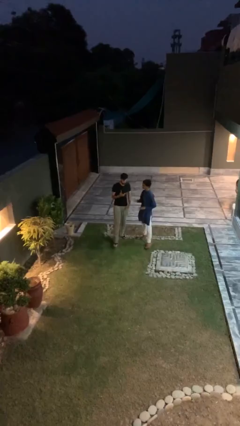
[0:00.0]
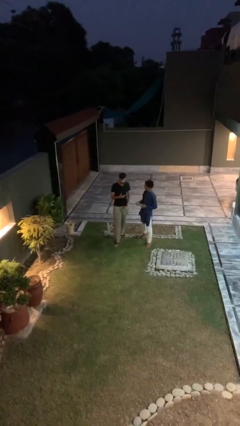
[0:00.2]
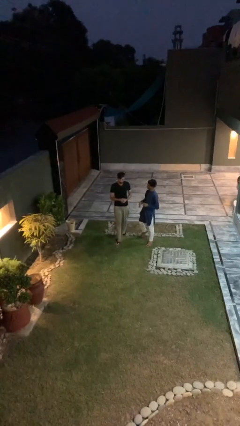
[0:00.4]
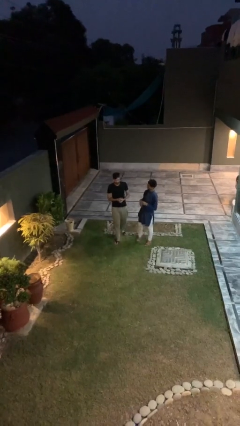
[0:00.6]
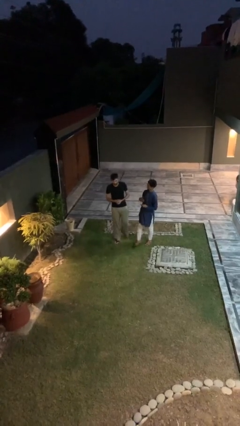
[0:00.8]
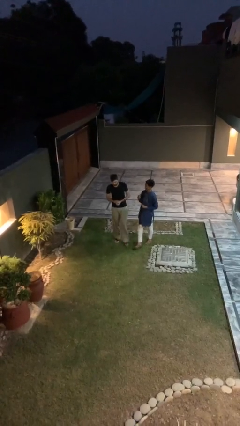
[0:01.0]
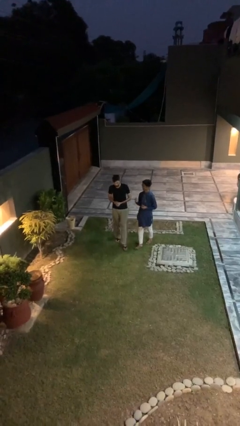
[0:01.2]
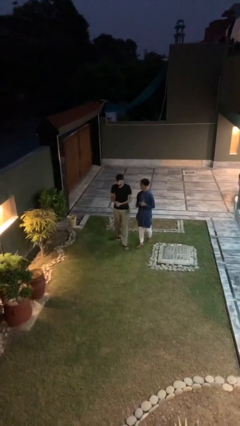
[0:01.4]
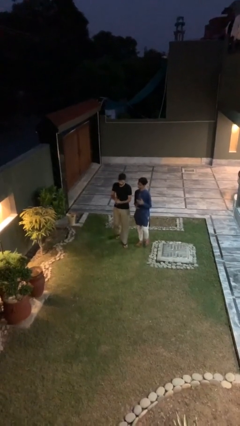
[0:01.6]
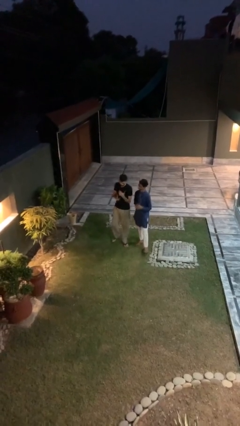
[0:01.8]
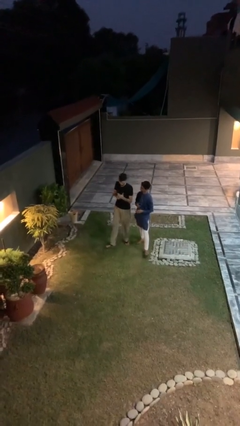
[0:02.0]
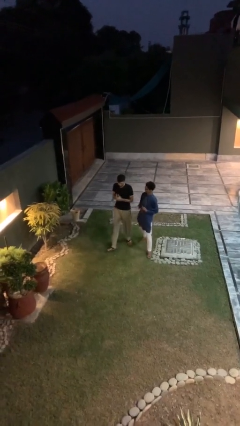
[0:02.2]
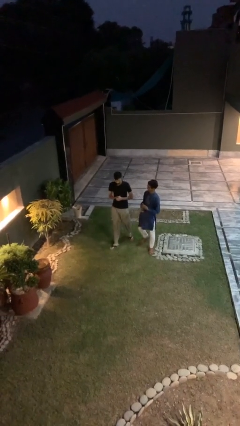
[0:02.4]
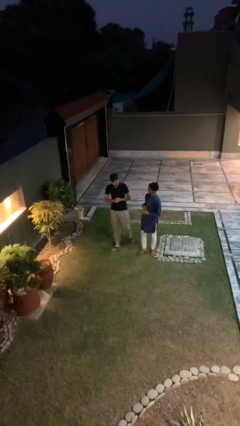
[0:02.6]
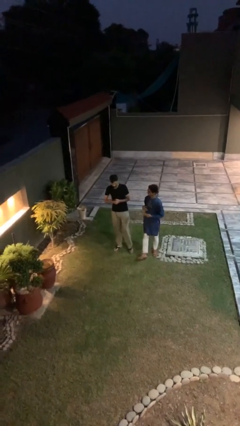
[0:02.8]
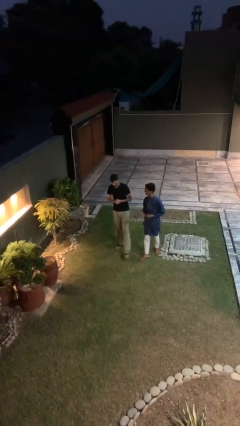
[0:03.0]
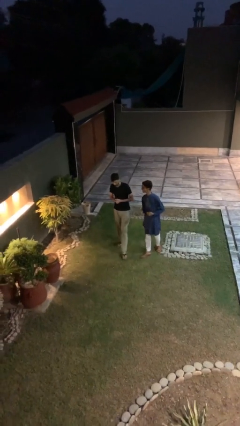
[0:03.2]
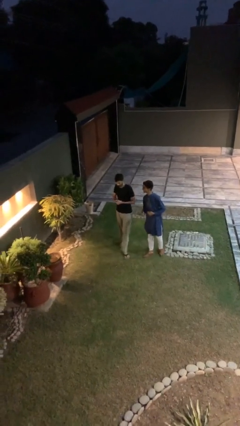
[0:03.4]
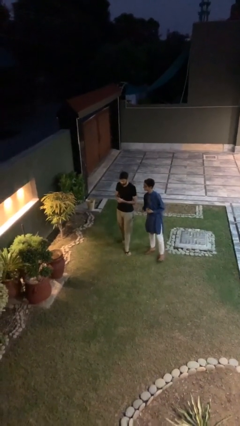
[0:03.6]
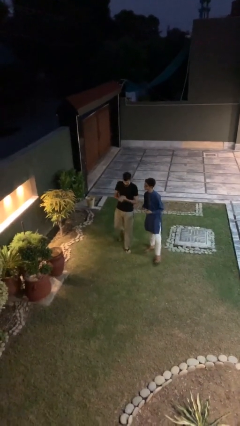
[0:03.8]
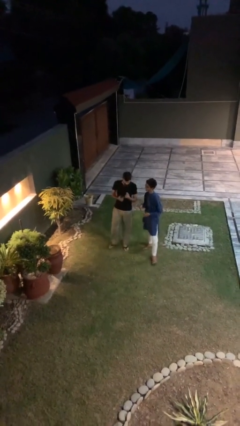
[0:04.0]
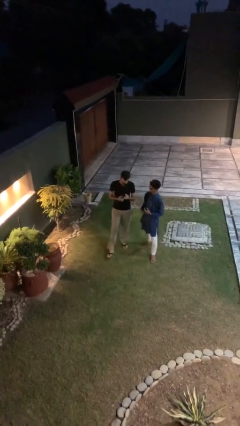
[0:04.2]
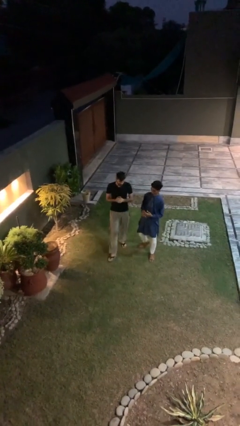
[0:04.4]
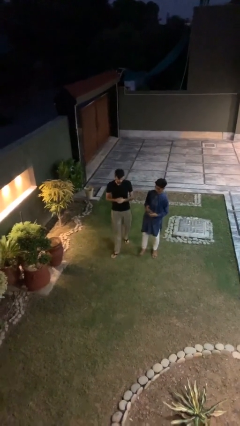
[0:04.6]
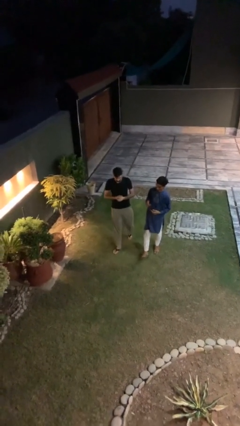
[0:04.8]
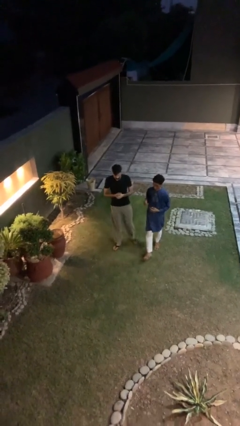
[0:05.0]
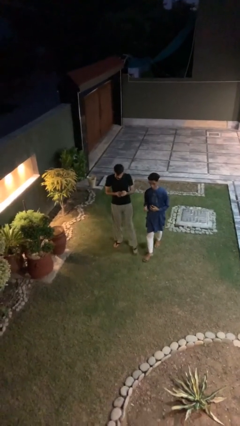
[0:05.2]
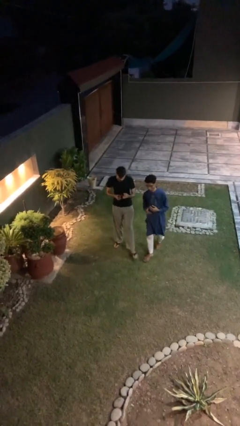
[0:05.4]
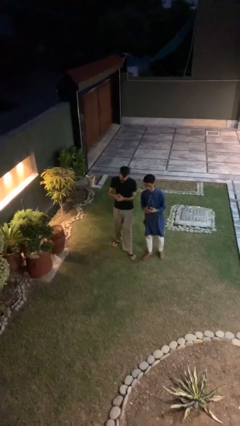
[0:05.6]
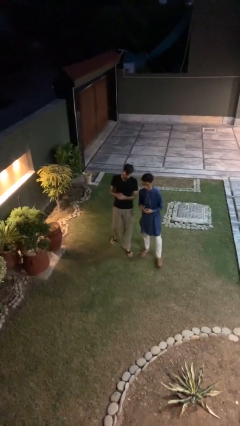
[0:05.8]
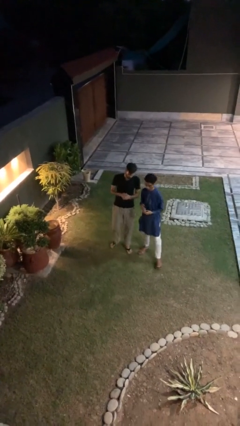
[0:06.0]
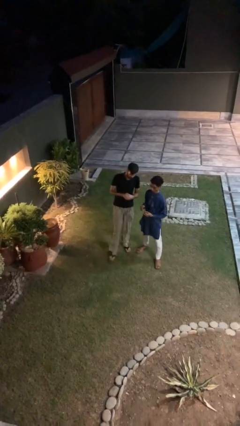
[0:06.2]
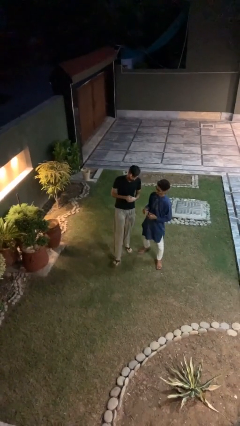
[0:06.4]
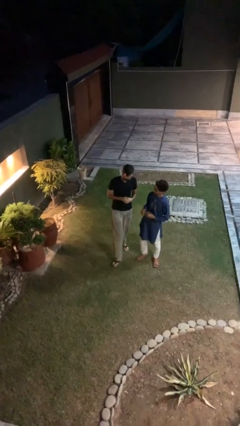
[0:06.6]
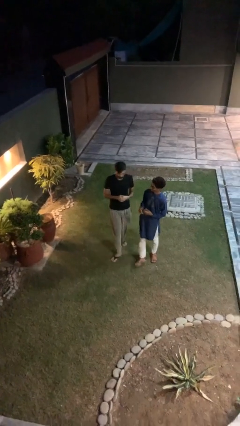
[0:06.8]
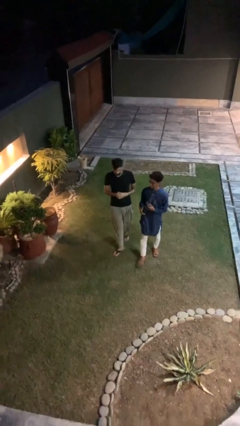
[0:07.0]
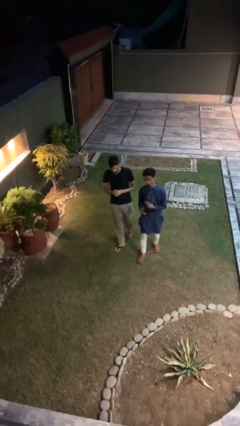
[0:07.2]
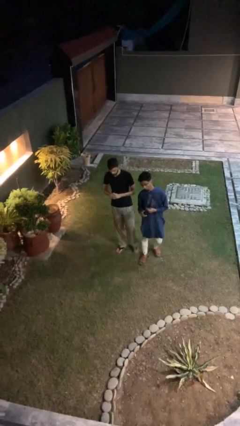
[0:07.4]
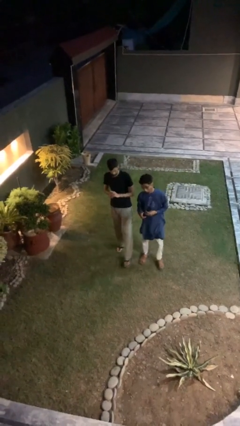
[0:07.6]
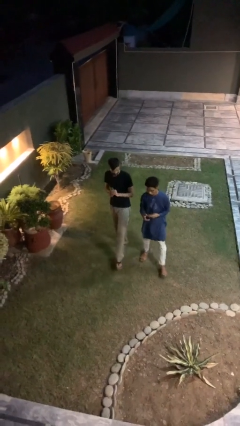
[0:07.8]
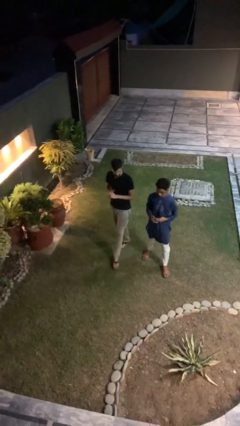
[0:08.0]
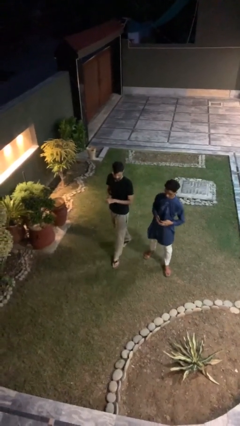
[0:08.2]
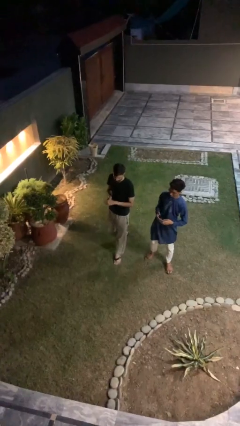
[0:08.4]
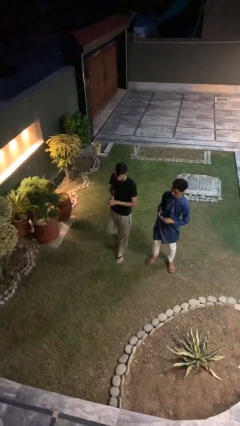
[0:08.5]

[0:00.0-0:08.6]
person talks to person

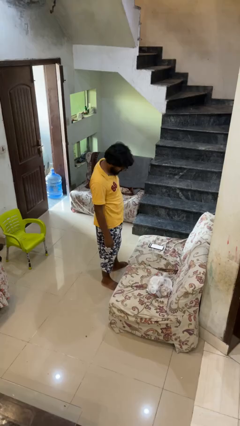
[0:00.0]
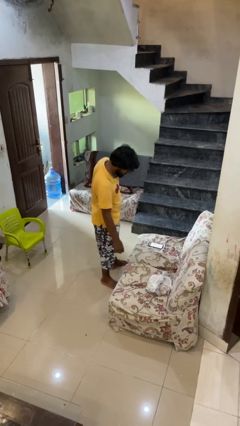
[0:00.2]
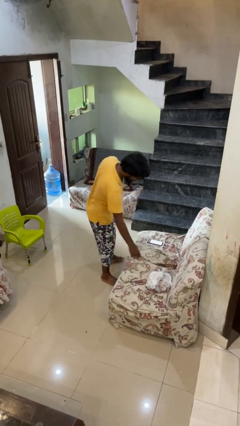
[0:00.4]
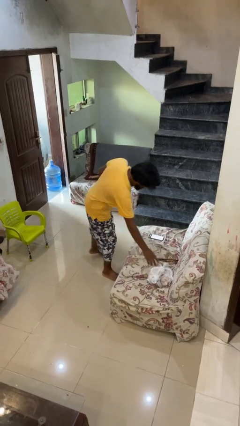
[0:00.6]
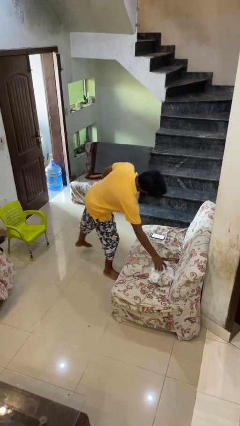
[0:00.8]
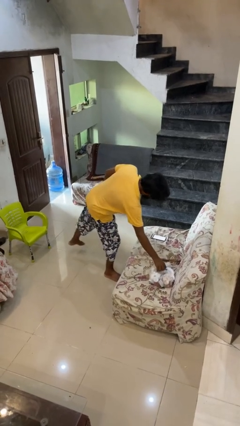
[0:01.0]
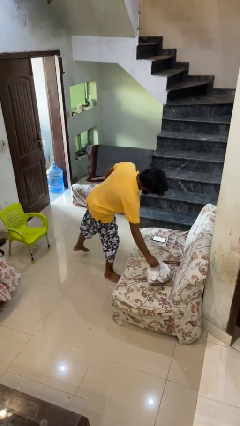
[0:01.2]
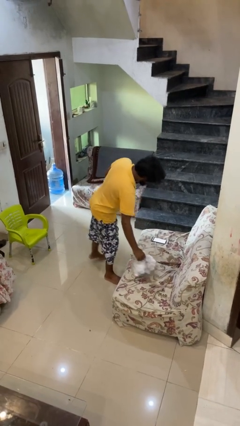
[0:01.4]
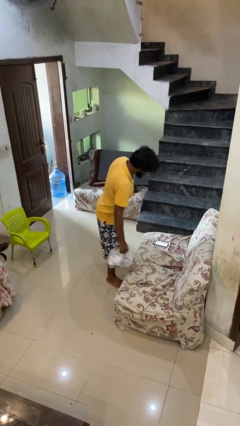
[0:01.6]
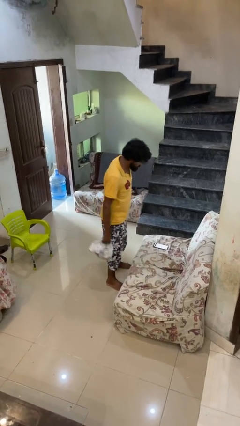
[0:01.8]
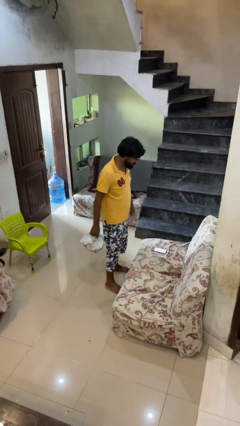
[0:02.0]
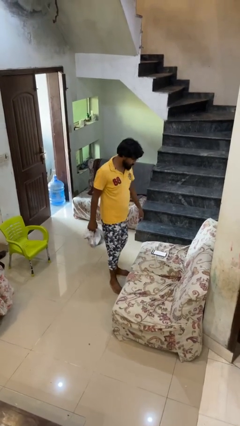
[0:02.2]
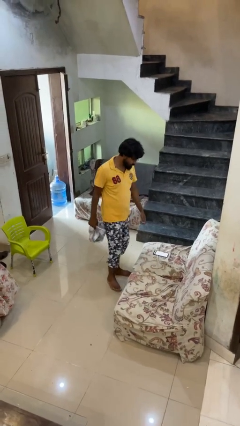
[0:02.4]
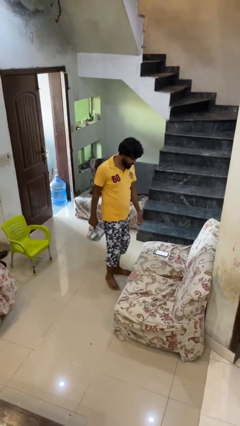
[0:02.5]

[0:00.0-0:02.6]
person picks up object from couch

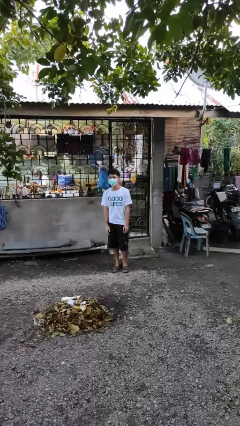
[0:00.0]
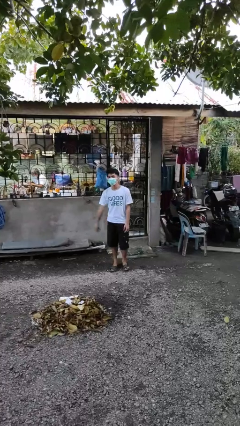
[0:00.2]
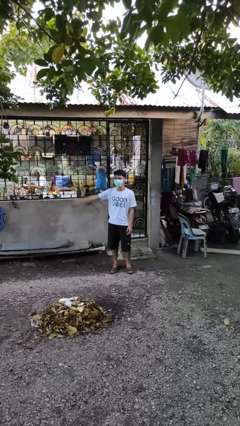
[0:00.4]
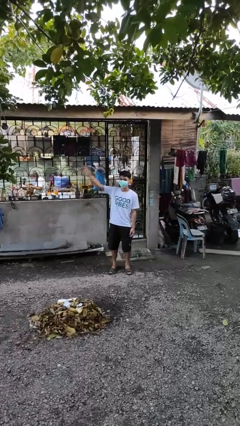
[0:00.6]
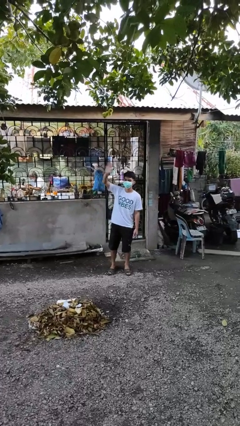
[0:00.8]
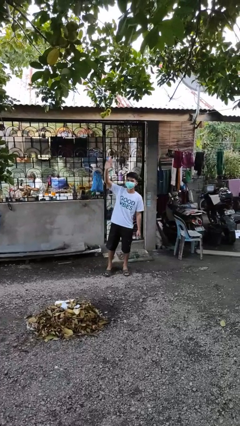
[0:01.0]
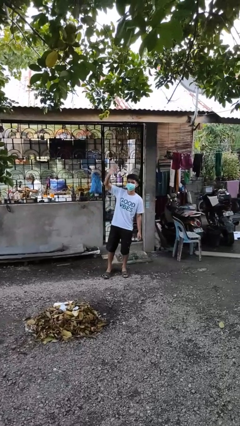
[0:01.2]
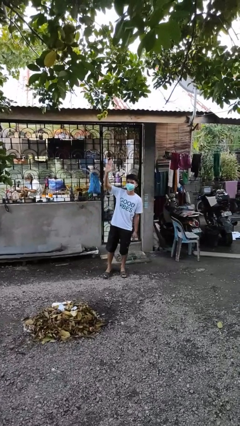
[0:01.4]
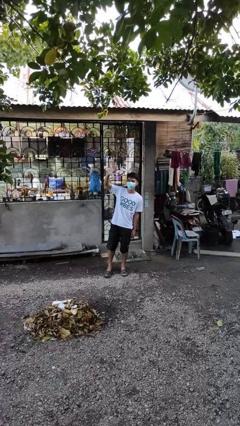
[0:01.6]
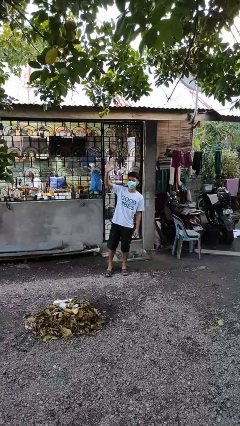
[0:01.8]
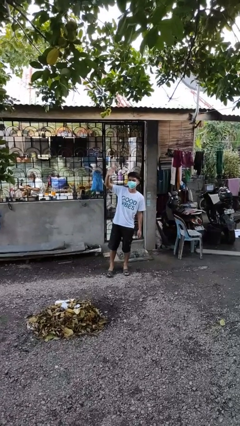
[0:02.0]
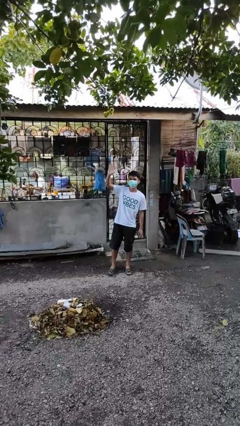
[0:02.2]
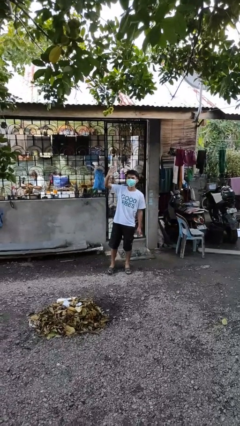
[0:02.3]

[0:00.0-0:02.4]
person waves at person

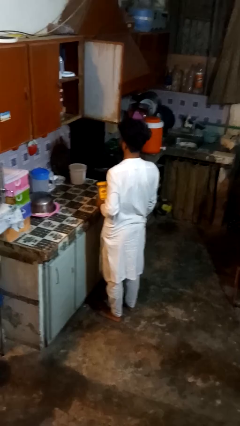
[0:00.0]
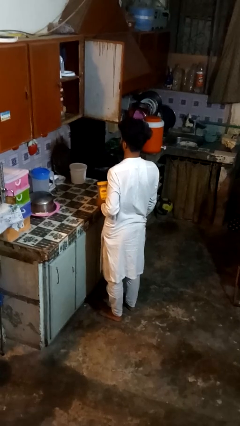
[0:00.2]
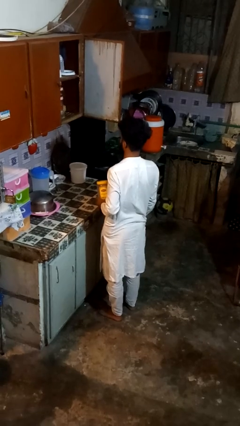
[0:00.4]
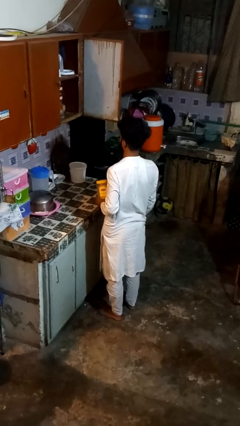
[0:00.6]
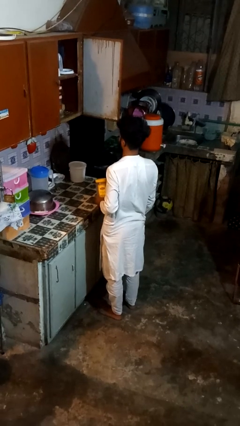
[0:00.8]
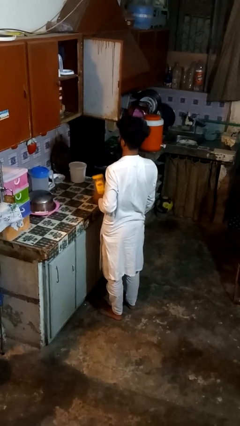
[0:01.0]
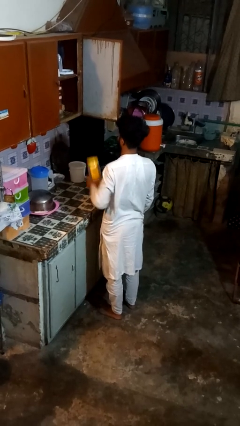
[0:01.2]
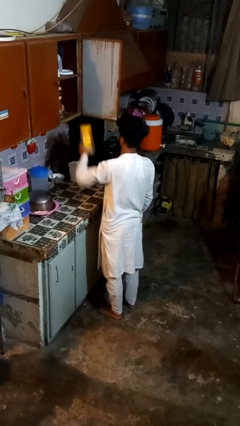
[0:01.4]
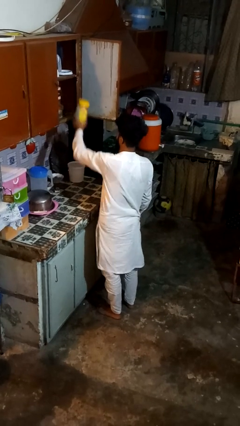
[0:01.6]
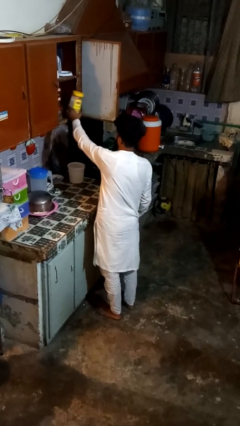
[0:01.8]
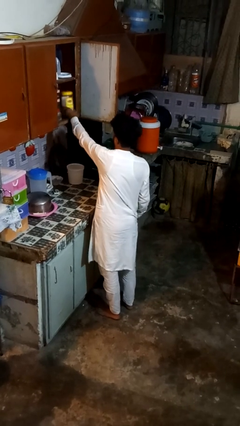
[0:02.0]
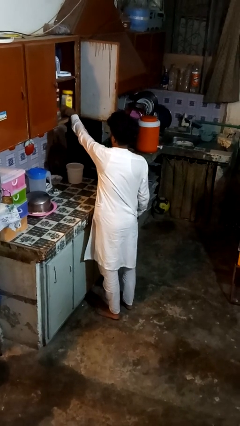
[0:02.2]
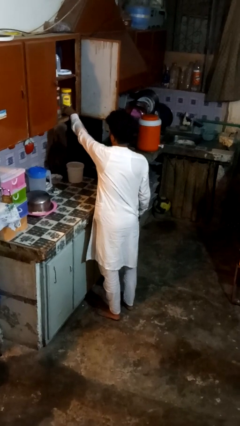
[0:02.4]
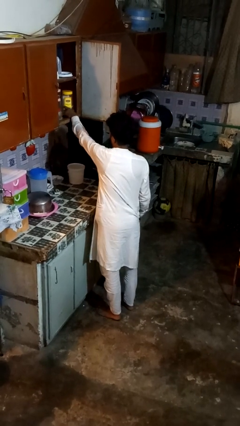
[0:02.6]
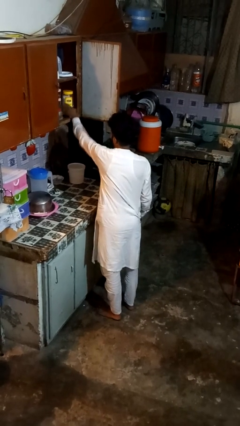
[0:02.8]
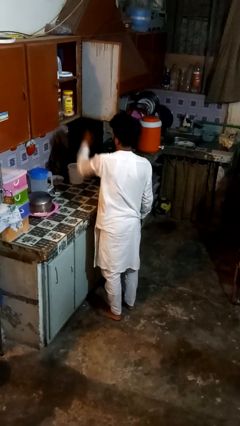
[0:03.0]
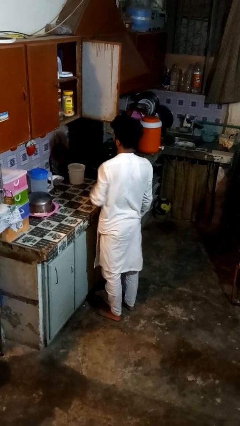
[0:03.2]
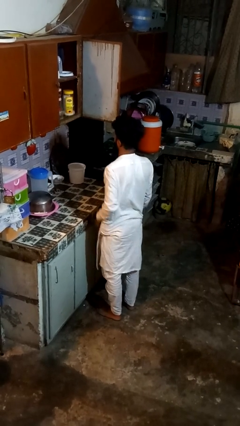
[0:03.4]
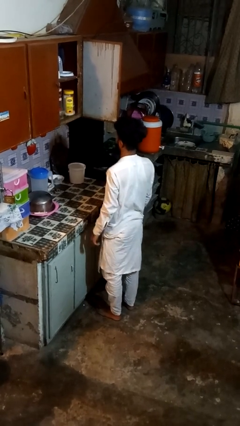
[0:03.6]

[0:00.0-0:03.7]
person takes object from cabinet

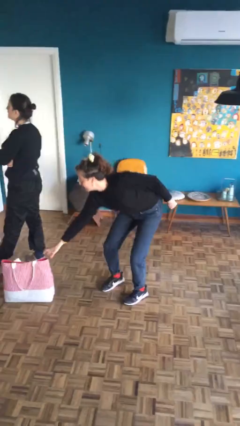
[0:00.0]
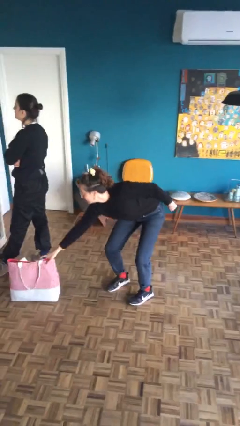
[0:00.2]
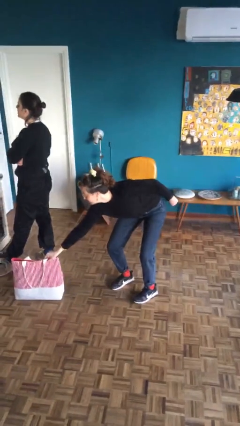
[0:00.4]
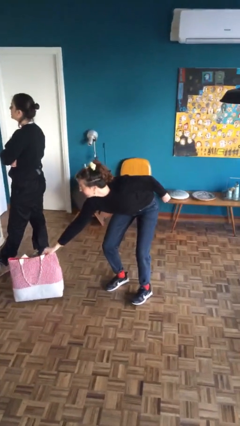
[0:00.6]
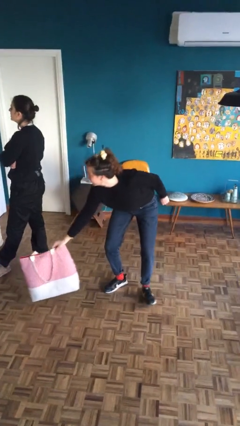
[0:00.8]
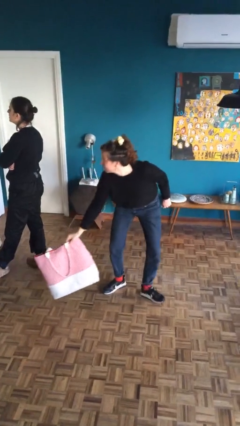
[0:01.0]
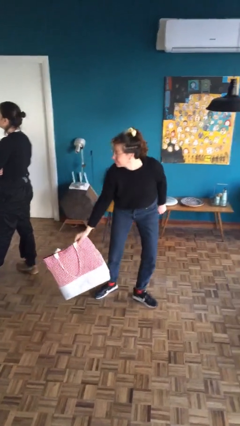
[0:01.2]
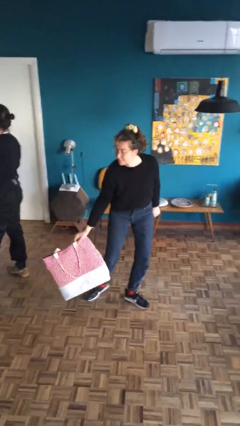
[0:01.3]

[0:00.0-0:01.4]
person steals object from person
